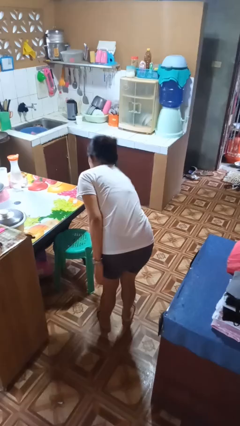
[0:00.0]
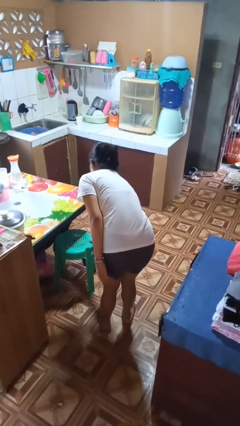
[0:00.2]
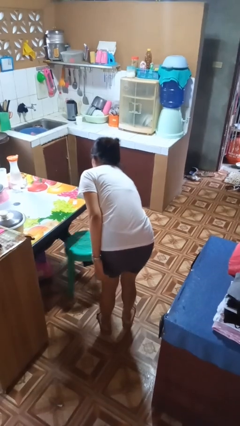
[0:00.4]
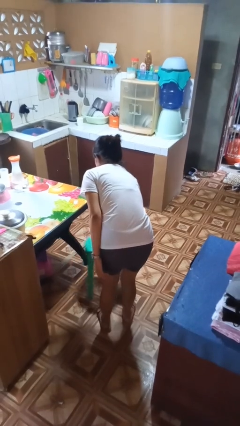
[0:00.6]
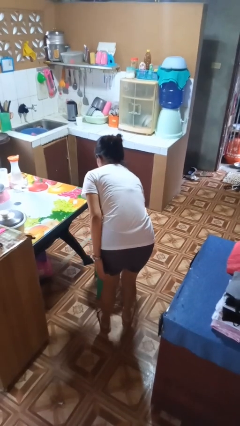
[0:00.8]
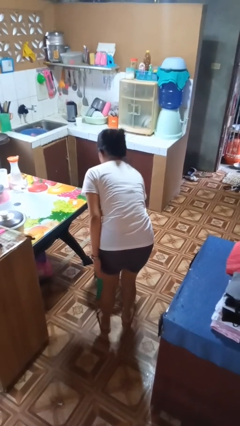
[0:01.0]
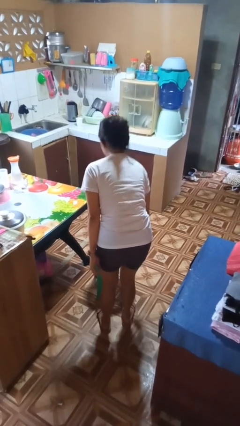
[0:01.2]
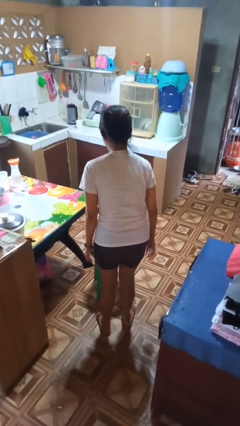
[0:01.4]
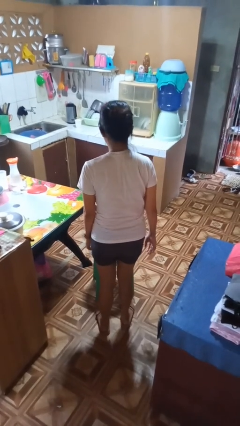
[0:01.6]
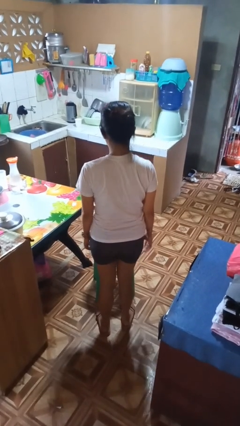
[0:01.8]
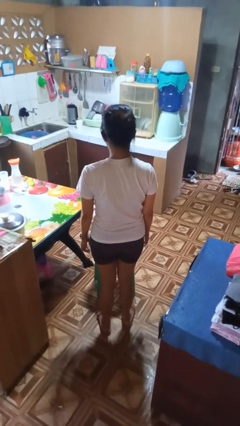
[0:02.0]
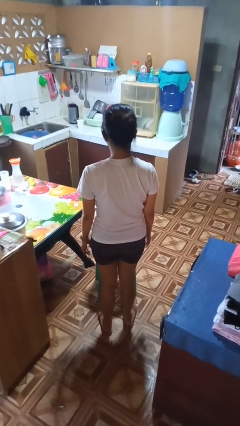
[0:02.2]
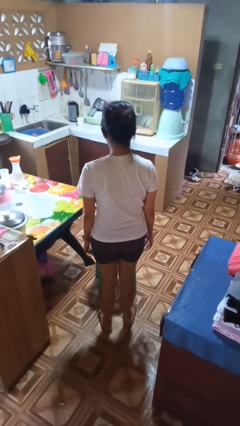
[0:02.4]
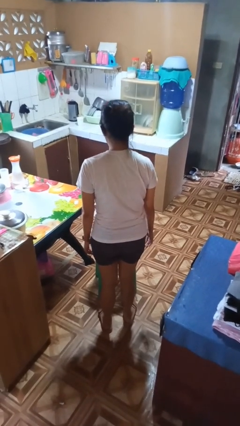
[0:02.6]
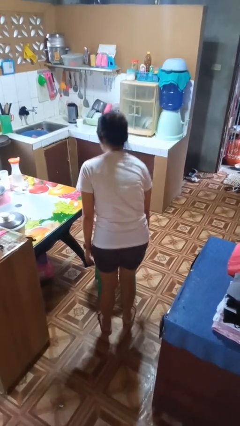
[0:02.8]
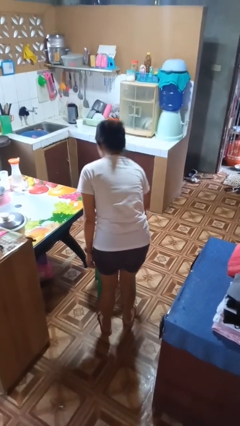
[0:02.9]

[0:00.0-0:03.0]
person pulls out chair

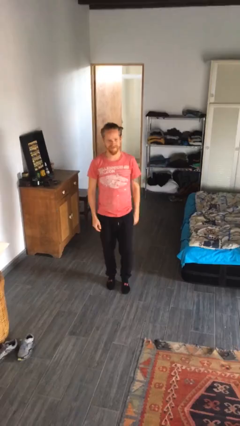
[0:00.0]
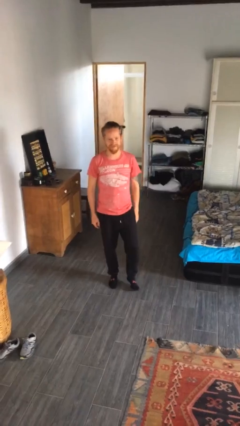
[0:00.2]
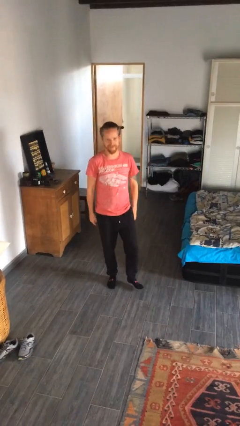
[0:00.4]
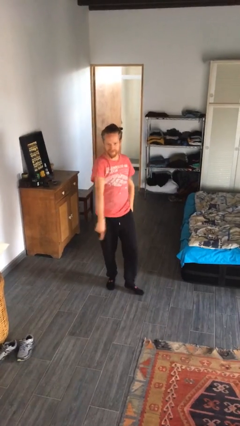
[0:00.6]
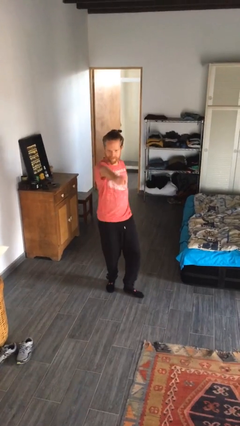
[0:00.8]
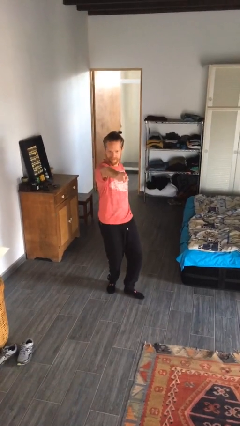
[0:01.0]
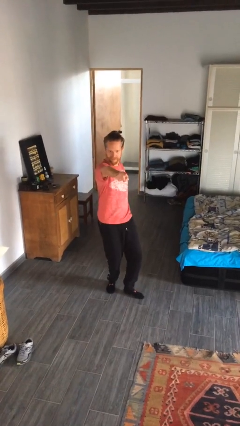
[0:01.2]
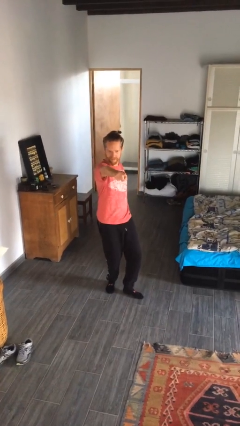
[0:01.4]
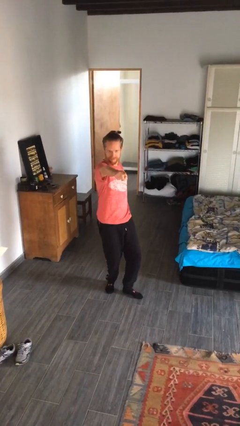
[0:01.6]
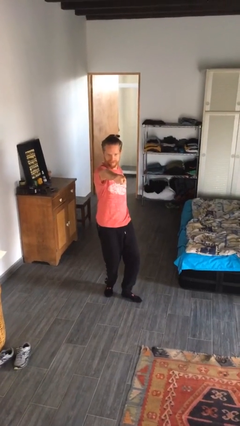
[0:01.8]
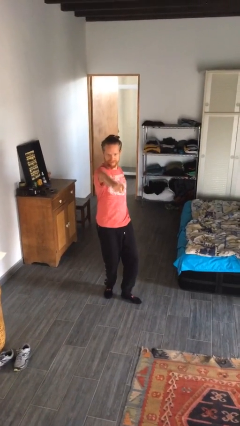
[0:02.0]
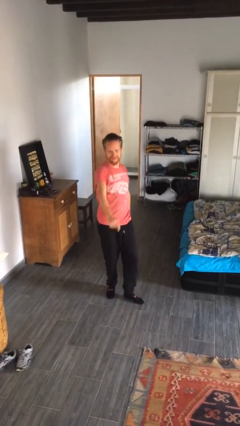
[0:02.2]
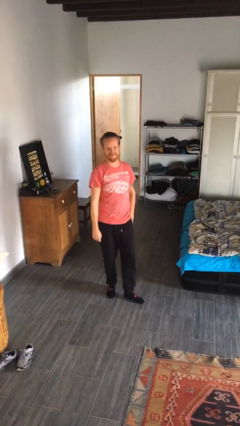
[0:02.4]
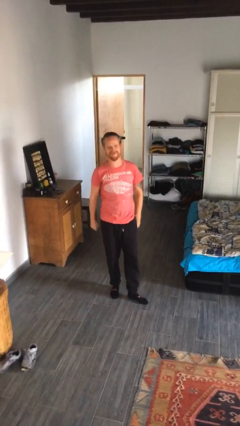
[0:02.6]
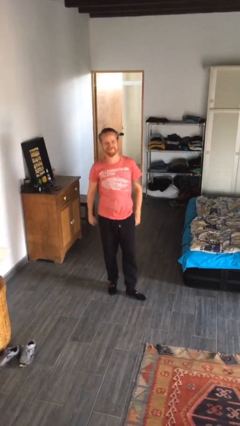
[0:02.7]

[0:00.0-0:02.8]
person points at person

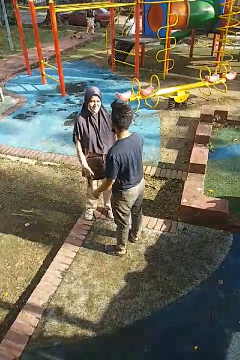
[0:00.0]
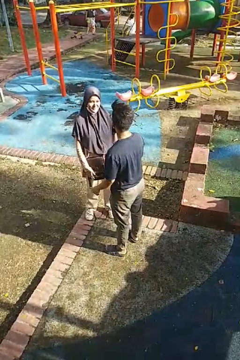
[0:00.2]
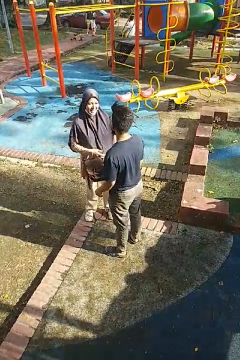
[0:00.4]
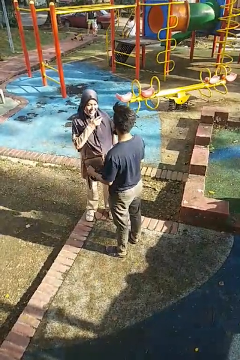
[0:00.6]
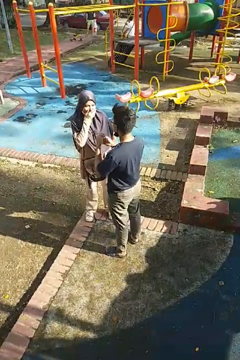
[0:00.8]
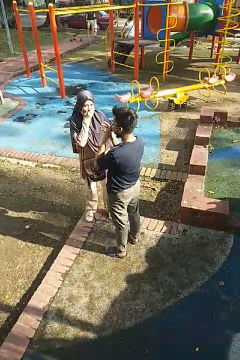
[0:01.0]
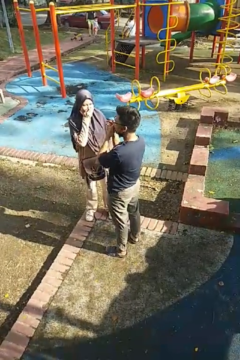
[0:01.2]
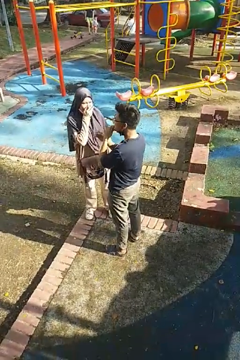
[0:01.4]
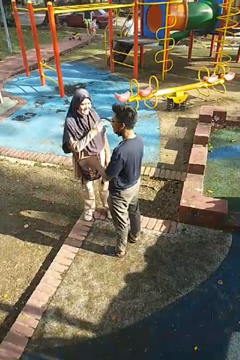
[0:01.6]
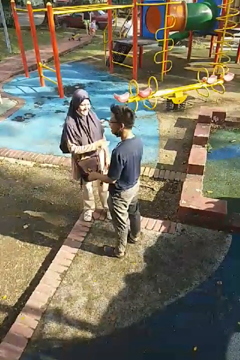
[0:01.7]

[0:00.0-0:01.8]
person laughs with person

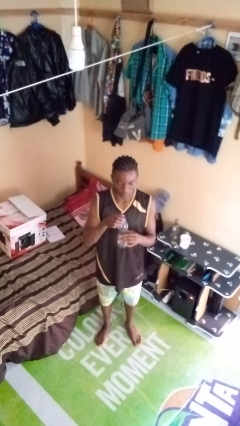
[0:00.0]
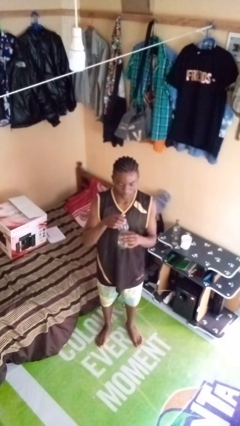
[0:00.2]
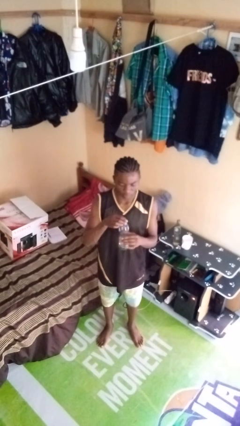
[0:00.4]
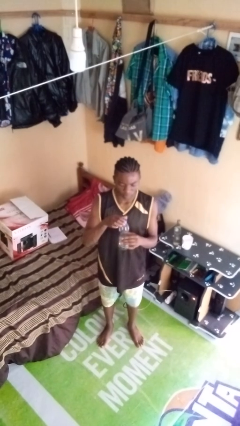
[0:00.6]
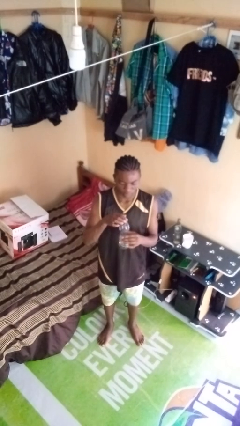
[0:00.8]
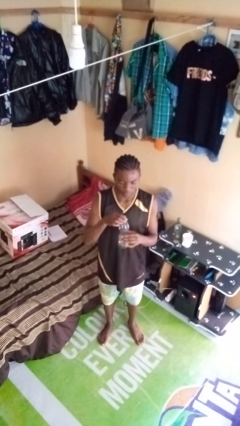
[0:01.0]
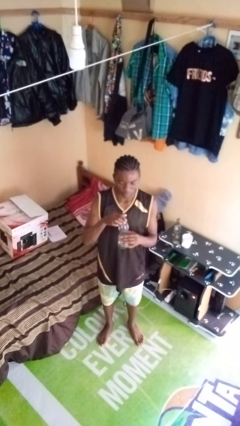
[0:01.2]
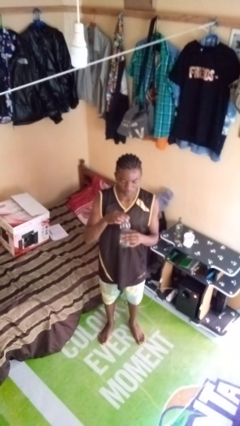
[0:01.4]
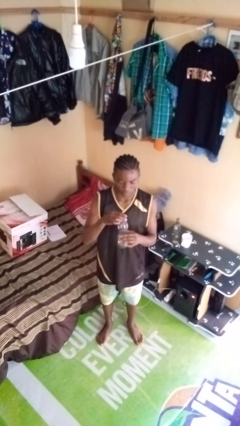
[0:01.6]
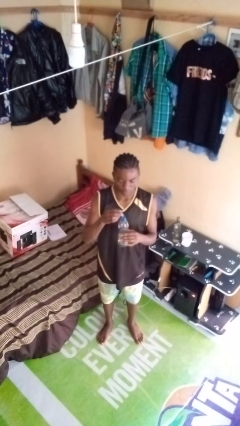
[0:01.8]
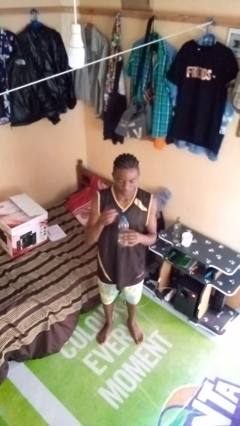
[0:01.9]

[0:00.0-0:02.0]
person unscrews lid from bottle

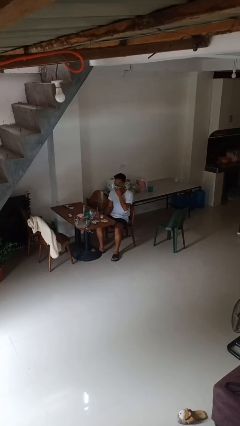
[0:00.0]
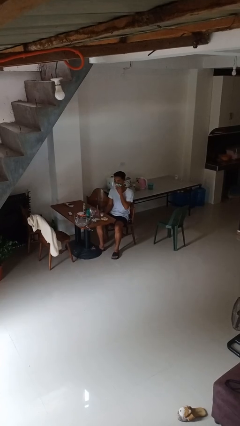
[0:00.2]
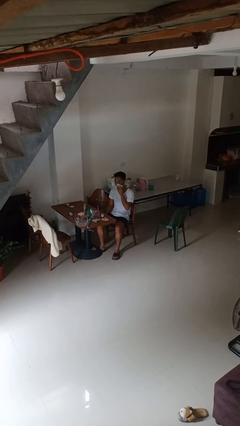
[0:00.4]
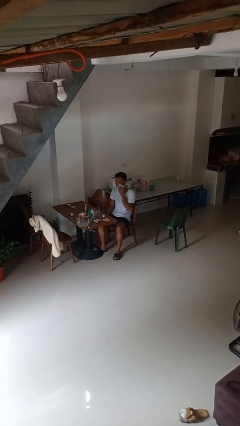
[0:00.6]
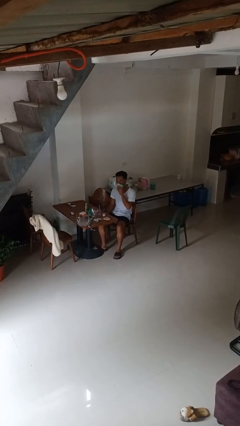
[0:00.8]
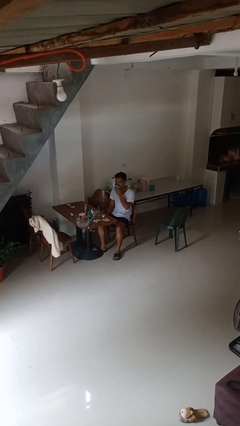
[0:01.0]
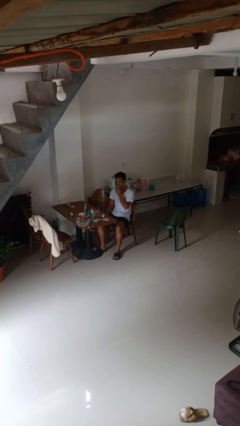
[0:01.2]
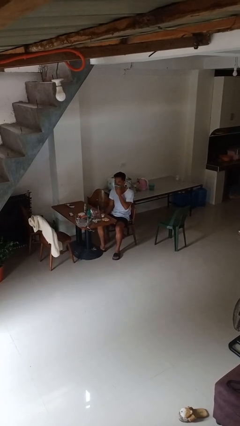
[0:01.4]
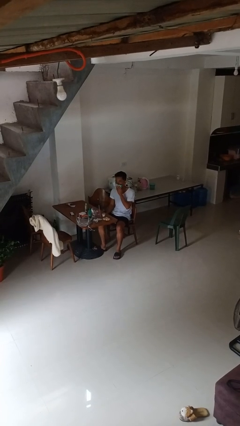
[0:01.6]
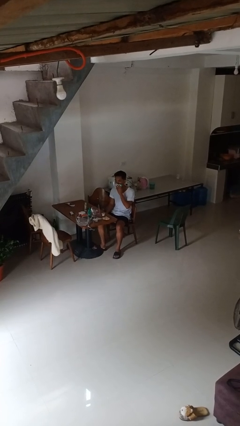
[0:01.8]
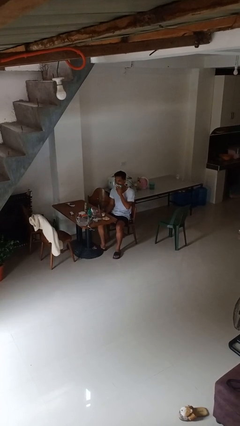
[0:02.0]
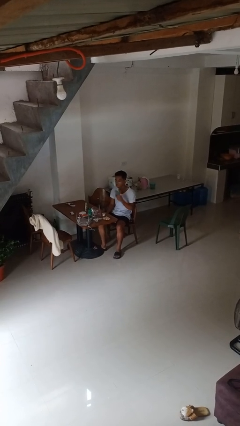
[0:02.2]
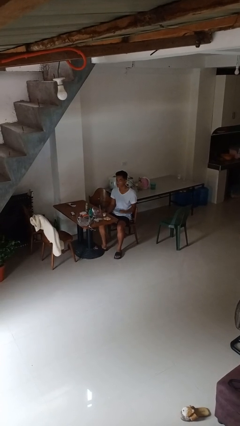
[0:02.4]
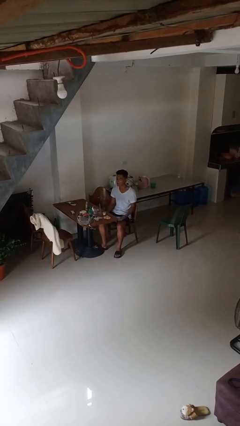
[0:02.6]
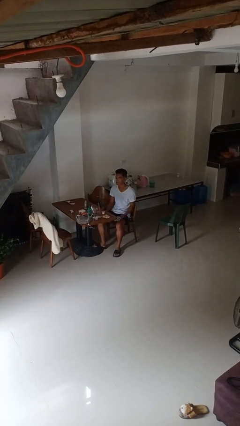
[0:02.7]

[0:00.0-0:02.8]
person wipes mouth with napkin

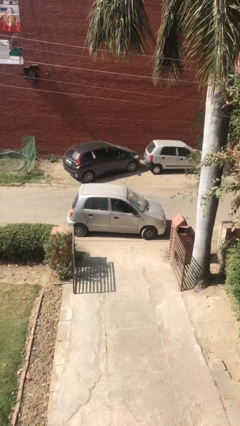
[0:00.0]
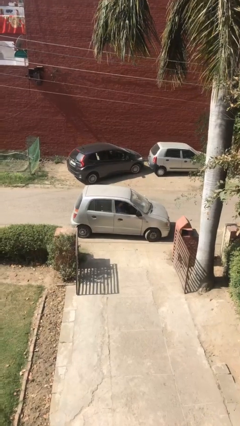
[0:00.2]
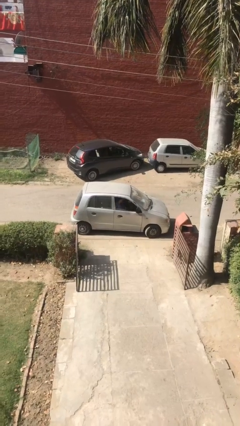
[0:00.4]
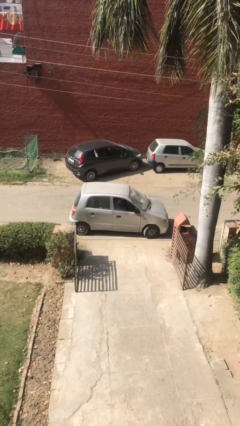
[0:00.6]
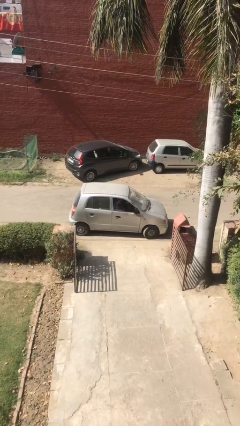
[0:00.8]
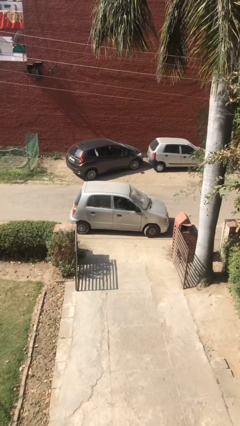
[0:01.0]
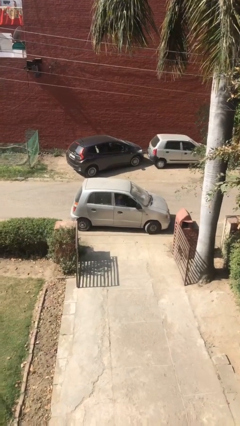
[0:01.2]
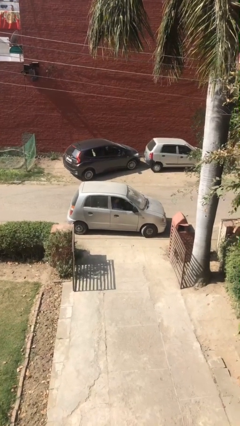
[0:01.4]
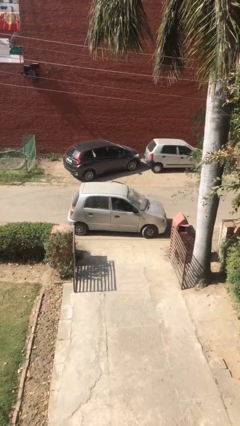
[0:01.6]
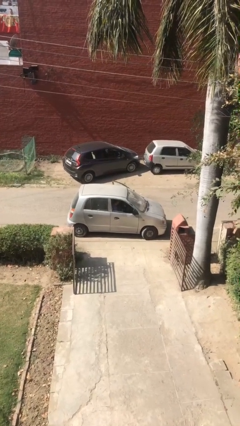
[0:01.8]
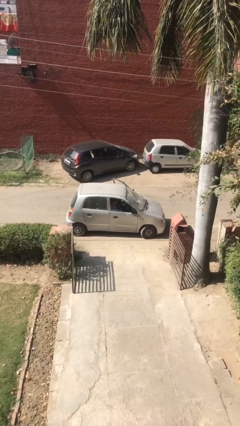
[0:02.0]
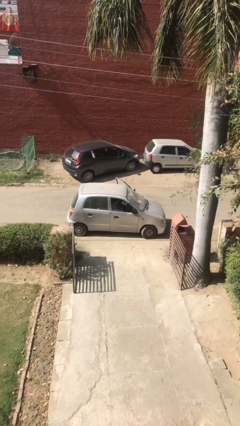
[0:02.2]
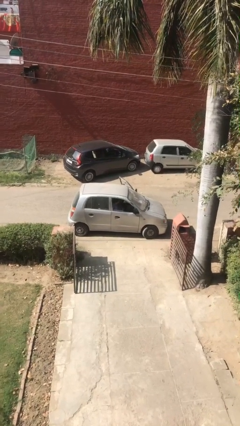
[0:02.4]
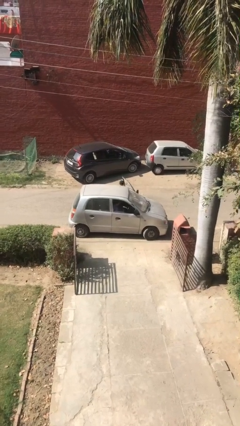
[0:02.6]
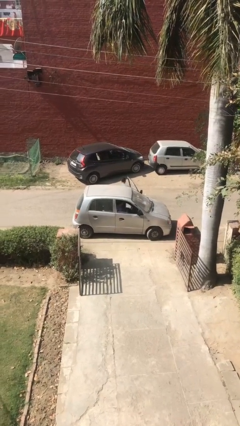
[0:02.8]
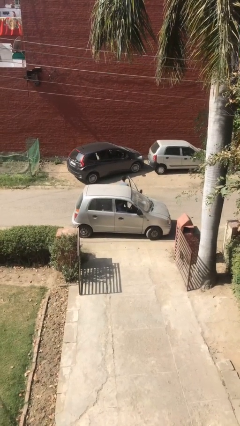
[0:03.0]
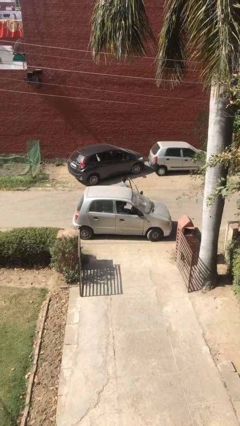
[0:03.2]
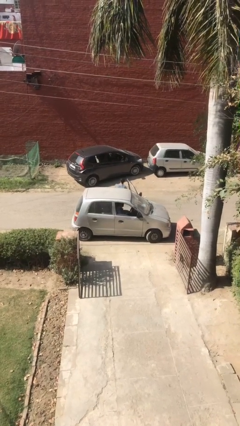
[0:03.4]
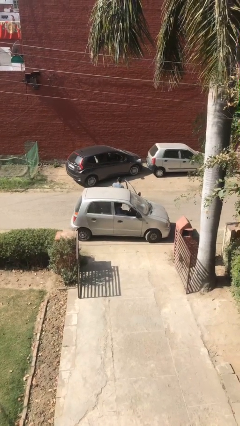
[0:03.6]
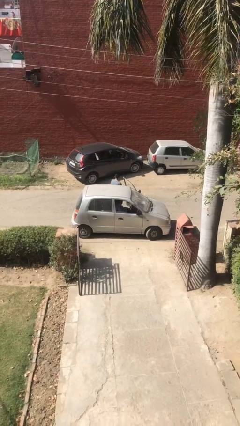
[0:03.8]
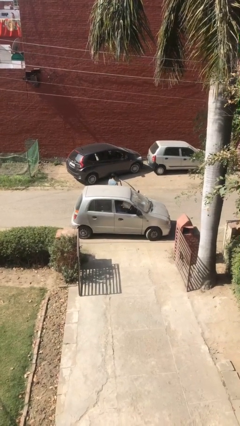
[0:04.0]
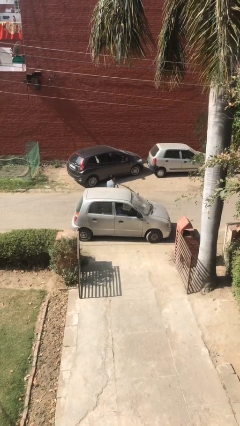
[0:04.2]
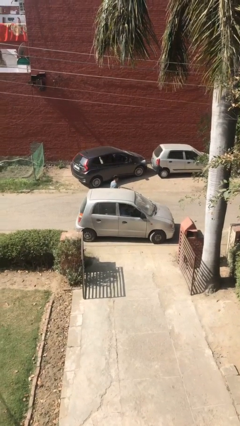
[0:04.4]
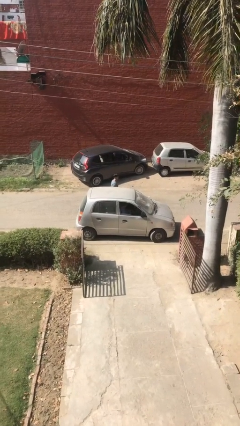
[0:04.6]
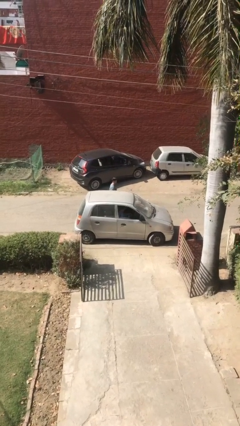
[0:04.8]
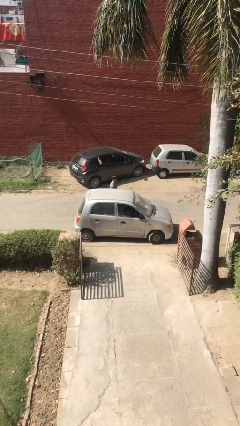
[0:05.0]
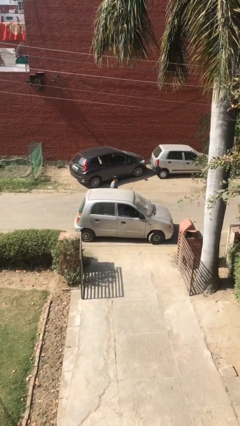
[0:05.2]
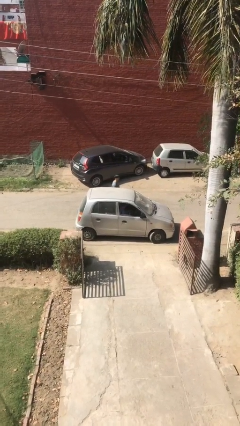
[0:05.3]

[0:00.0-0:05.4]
car drops off person
